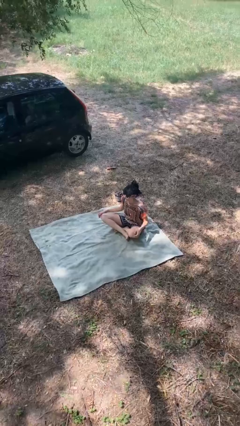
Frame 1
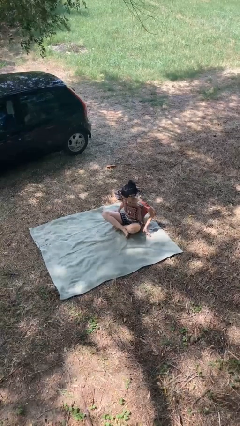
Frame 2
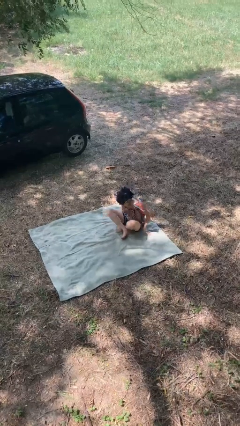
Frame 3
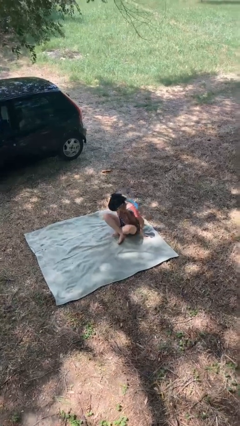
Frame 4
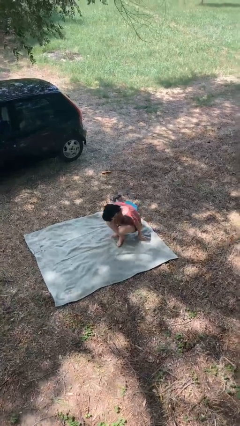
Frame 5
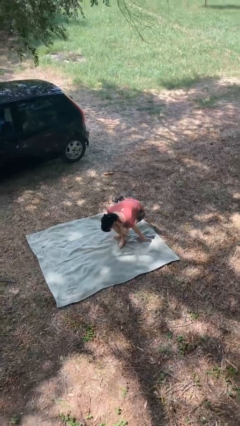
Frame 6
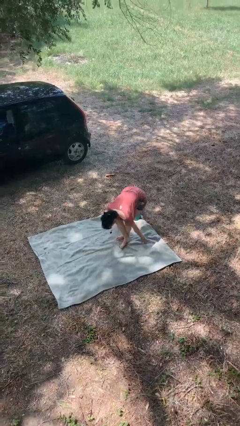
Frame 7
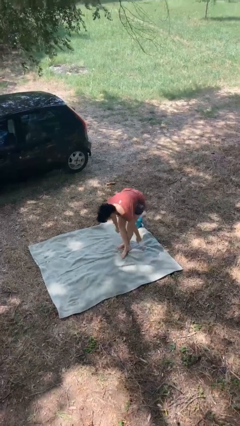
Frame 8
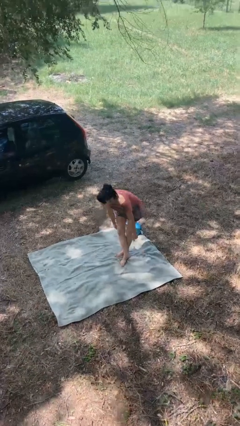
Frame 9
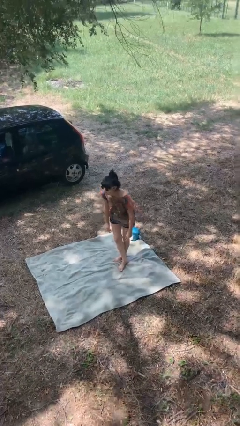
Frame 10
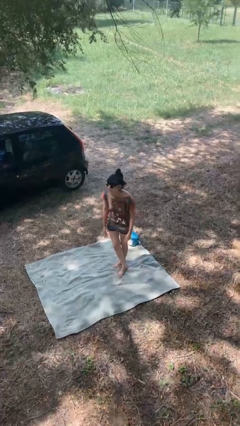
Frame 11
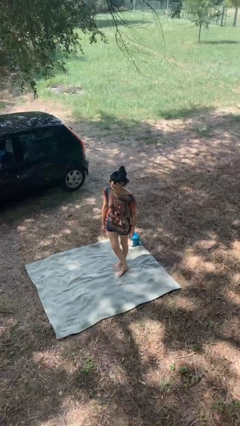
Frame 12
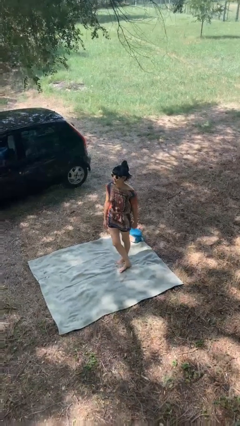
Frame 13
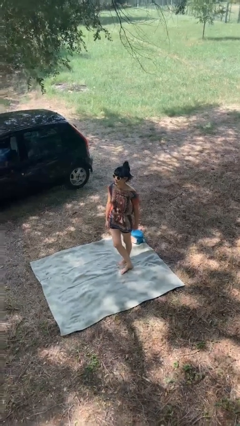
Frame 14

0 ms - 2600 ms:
person stands up from floor

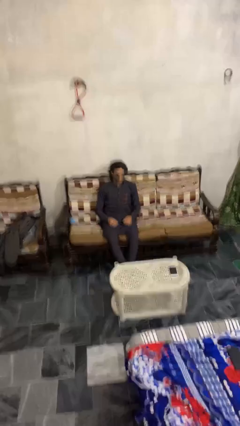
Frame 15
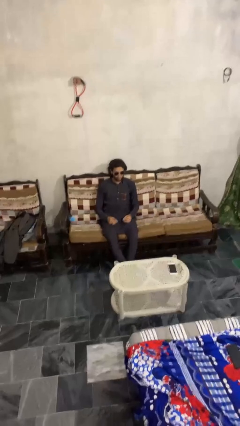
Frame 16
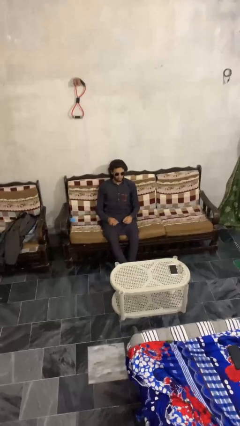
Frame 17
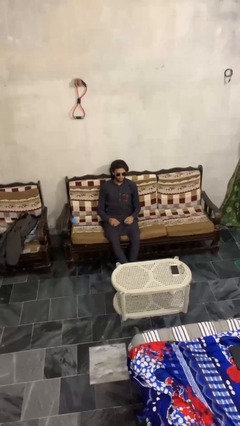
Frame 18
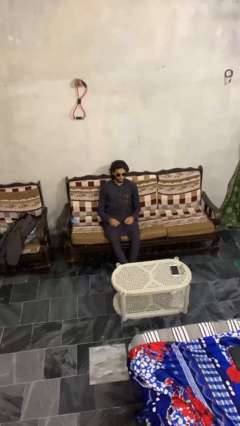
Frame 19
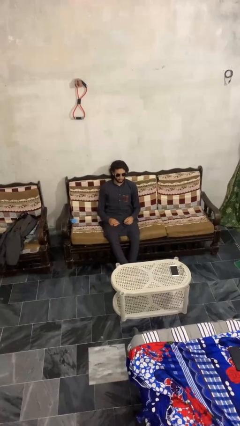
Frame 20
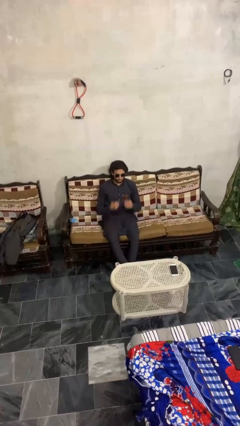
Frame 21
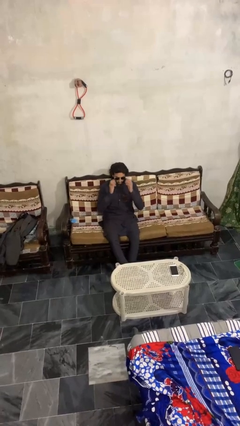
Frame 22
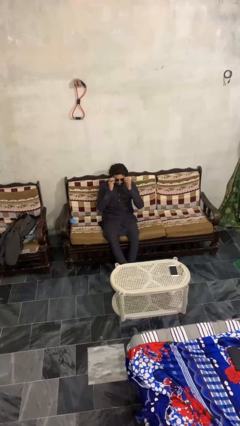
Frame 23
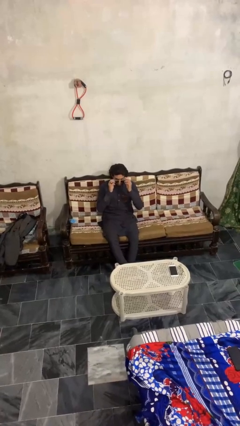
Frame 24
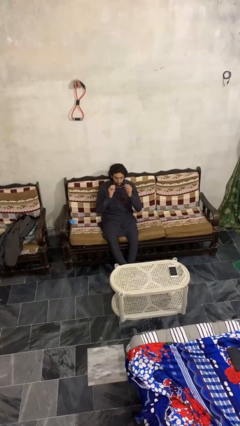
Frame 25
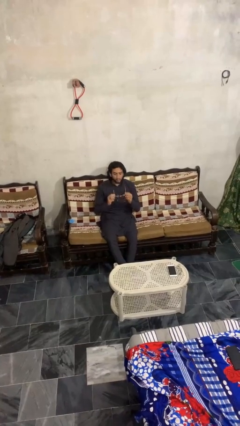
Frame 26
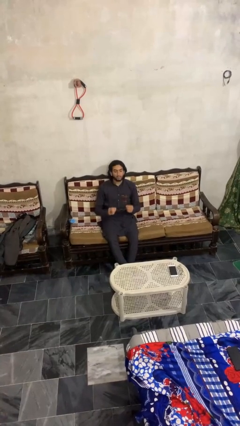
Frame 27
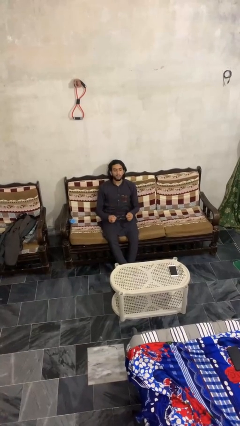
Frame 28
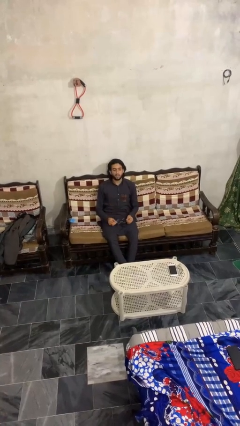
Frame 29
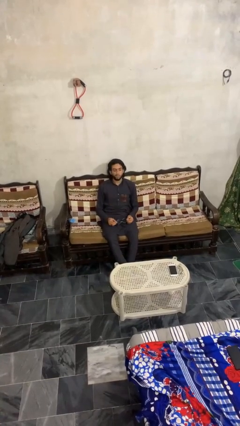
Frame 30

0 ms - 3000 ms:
person takes off sunglasses

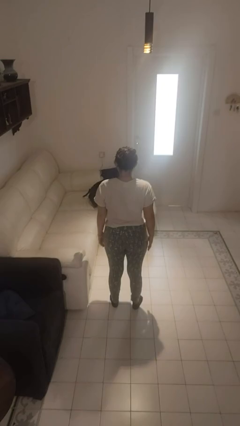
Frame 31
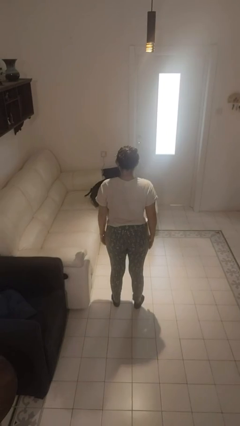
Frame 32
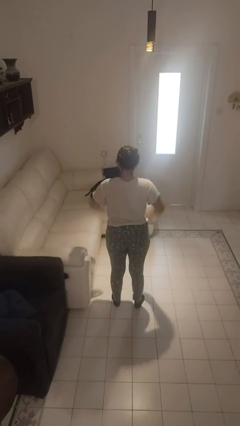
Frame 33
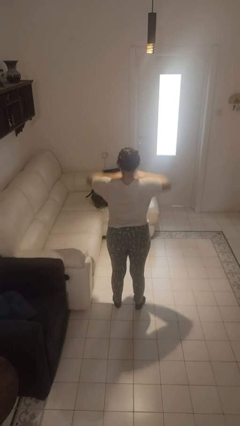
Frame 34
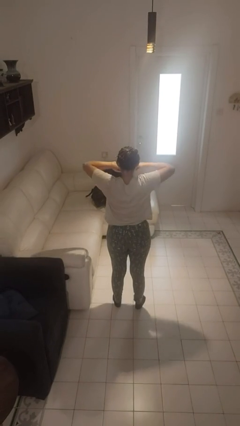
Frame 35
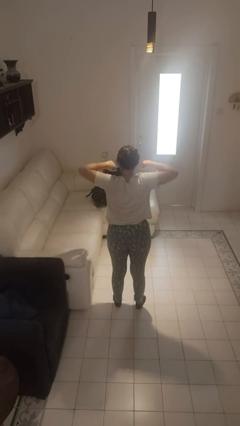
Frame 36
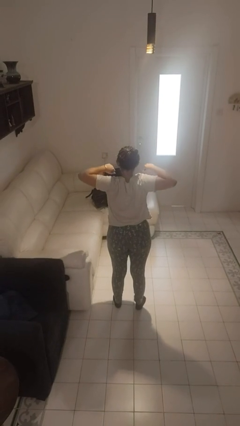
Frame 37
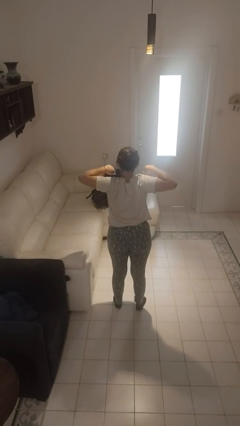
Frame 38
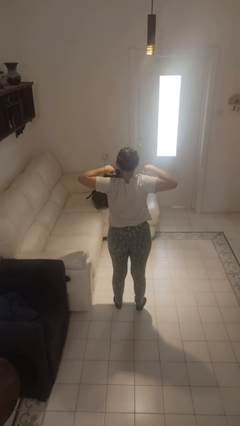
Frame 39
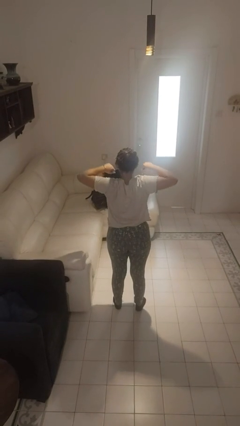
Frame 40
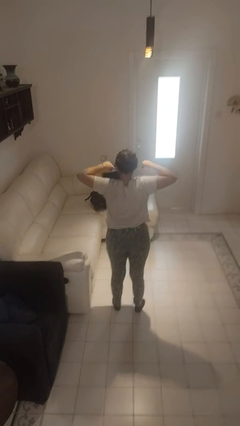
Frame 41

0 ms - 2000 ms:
person stretches back

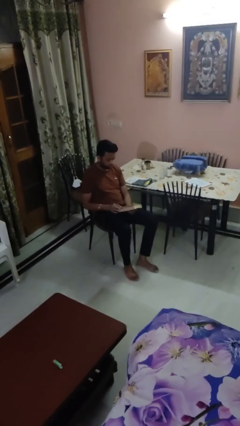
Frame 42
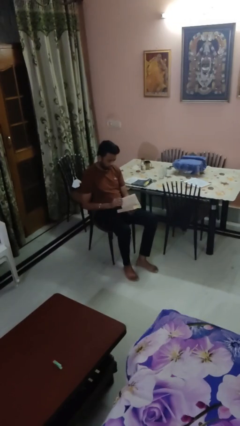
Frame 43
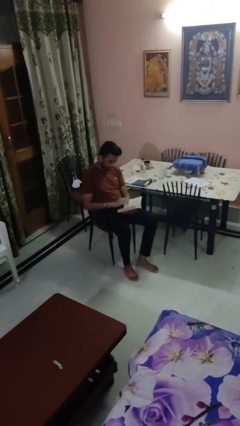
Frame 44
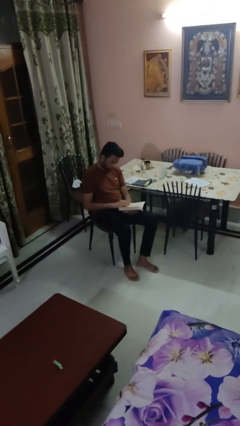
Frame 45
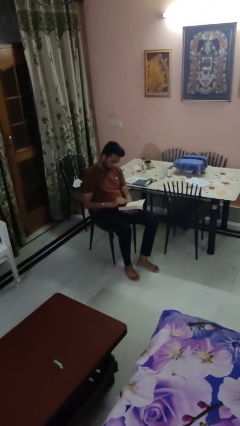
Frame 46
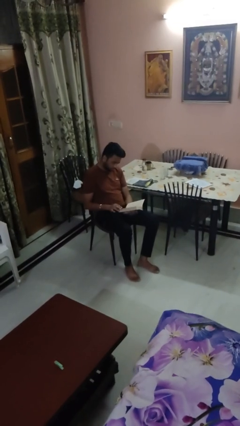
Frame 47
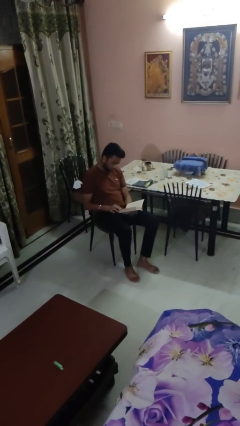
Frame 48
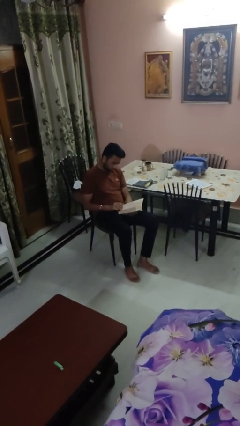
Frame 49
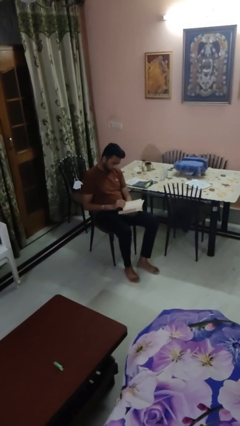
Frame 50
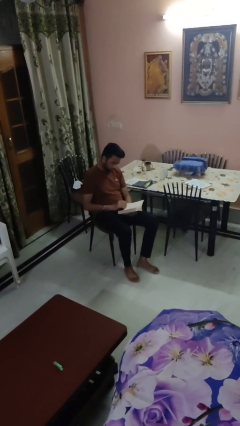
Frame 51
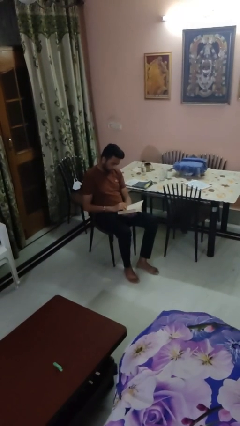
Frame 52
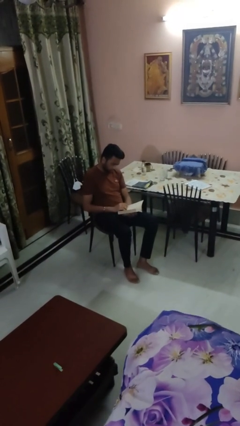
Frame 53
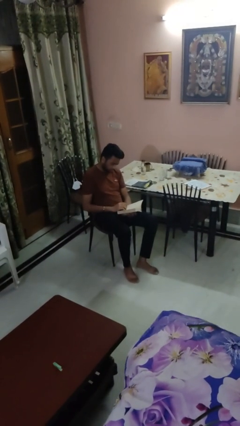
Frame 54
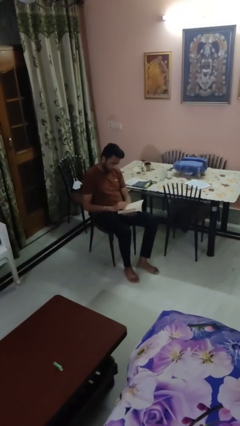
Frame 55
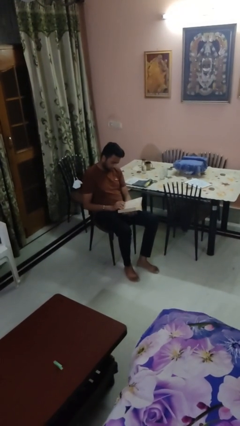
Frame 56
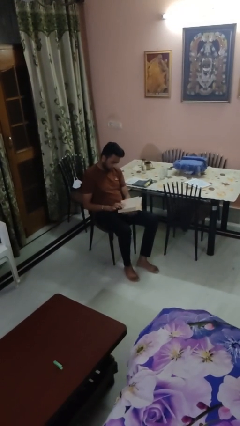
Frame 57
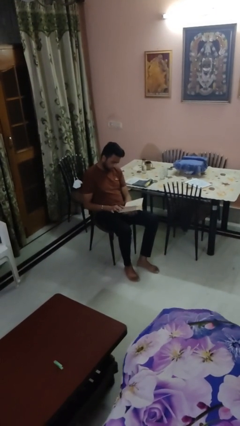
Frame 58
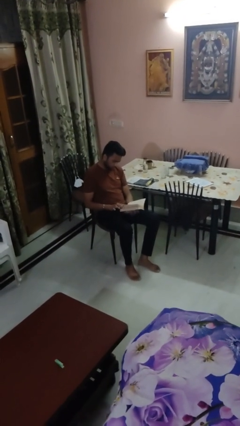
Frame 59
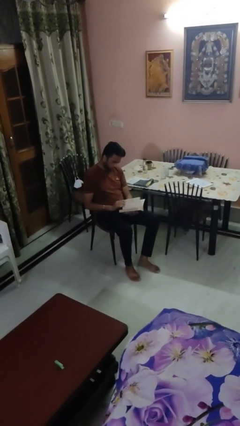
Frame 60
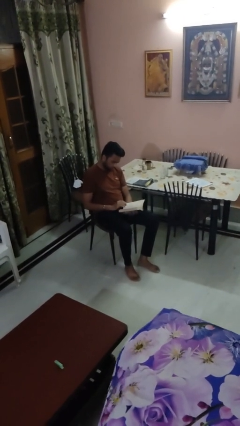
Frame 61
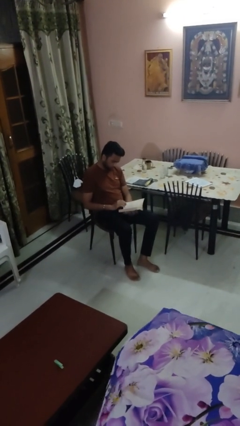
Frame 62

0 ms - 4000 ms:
person reads book

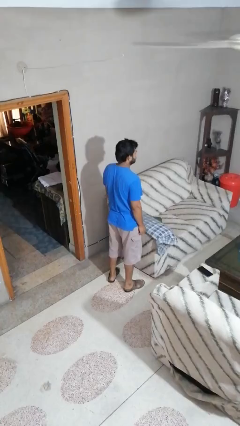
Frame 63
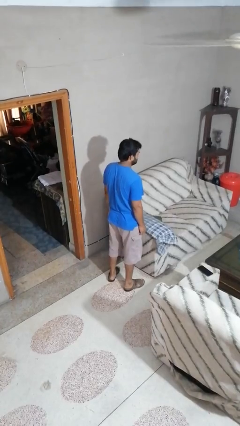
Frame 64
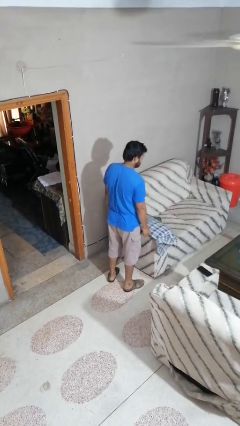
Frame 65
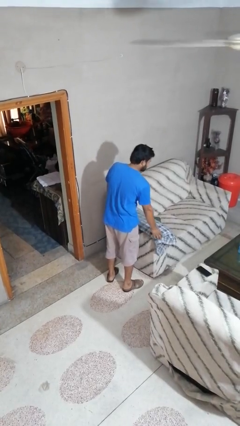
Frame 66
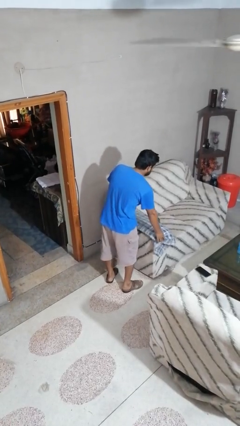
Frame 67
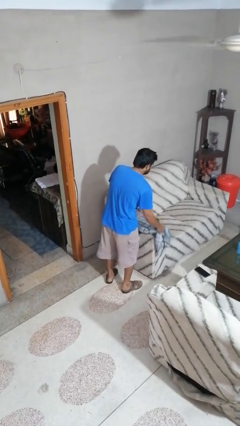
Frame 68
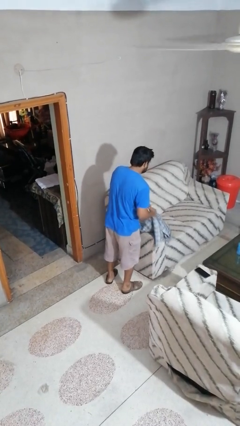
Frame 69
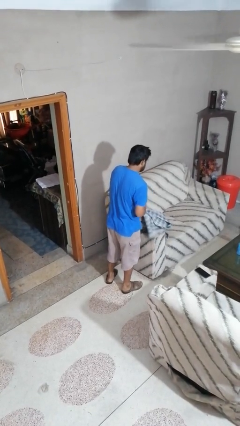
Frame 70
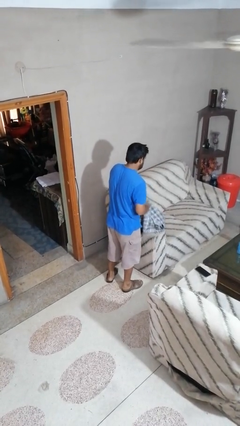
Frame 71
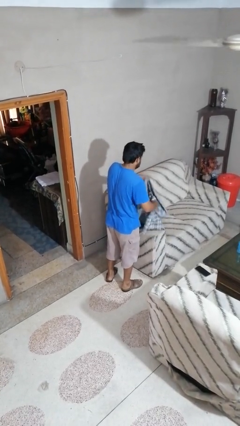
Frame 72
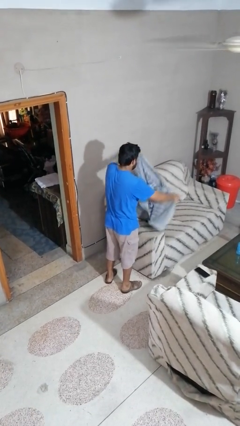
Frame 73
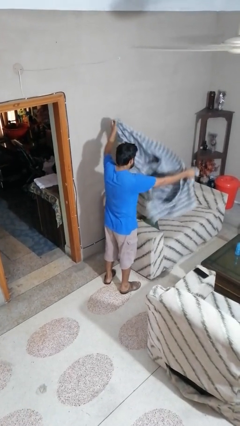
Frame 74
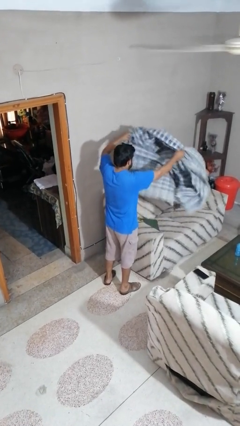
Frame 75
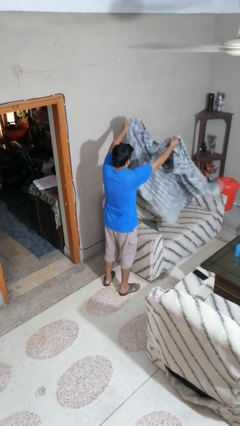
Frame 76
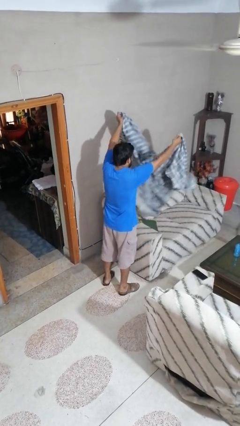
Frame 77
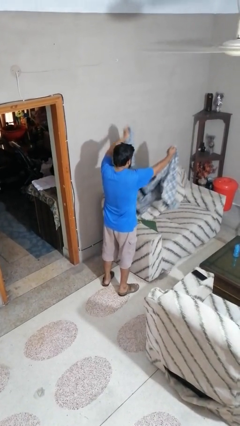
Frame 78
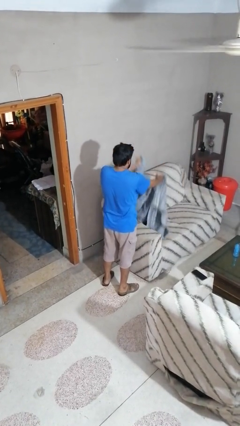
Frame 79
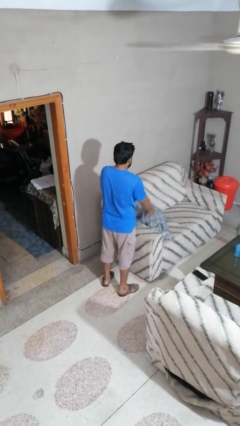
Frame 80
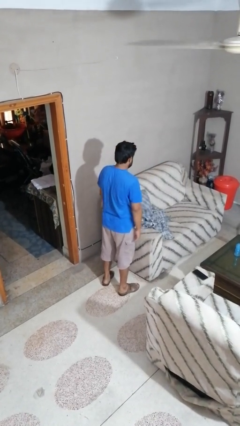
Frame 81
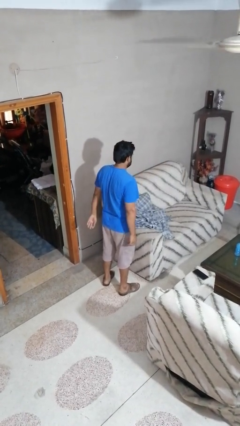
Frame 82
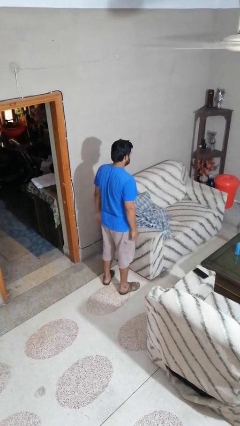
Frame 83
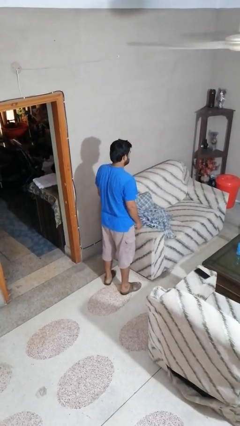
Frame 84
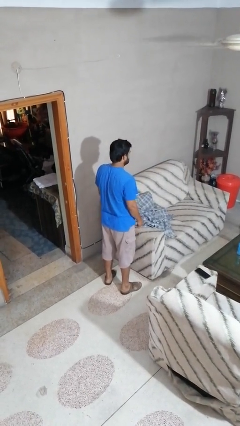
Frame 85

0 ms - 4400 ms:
person unfolds blanket

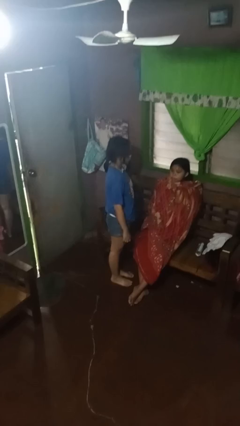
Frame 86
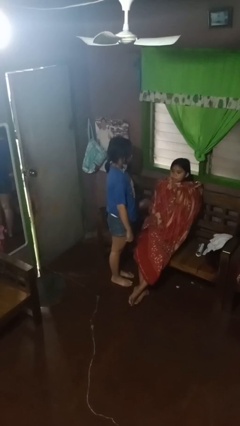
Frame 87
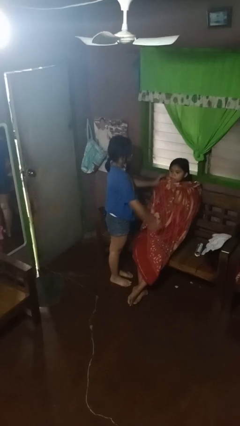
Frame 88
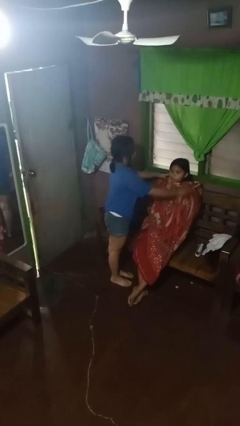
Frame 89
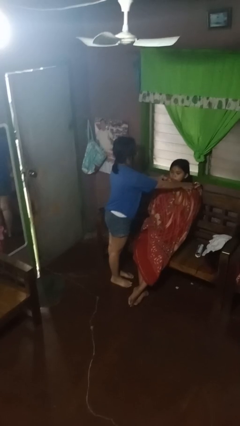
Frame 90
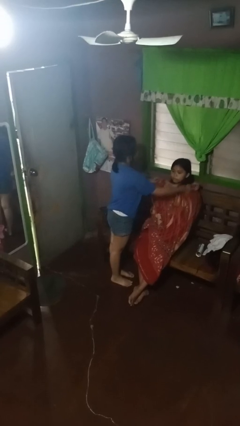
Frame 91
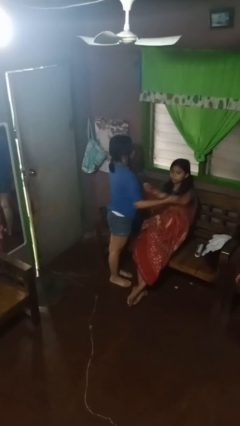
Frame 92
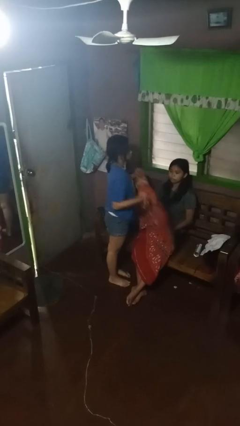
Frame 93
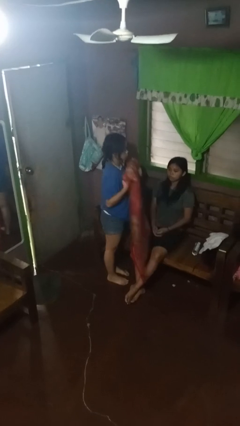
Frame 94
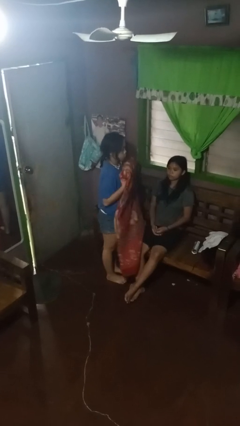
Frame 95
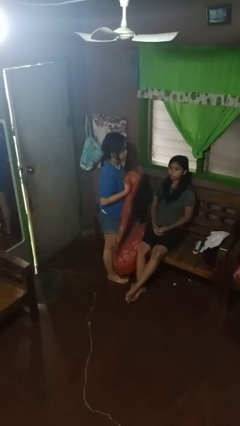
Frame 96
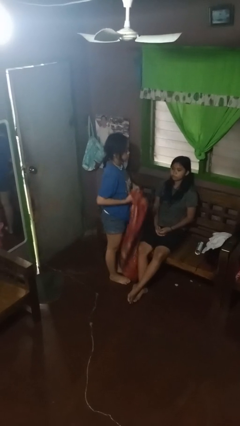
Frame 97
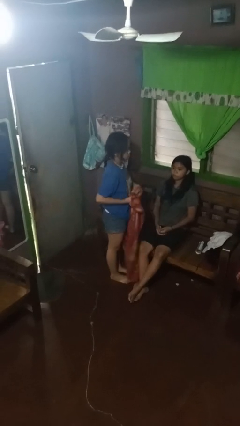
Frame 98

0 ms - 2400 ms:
person uncovers friend with blanket
